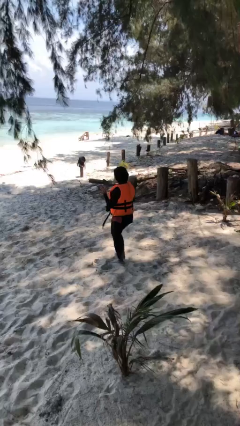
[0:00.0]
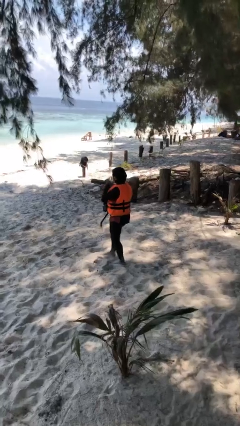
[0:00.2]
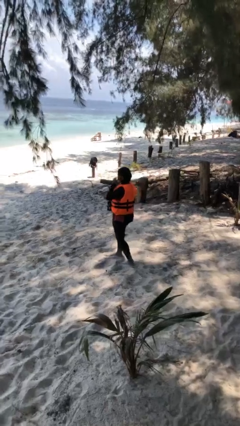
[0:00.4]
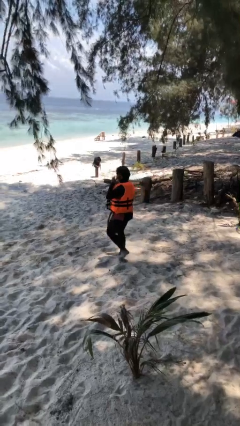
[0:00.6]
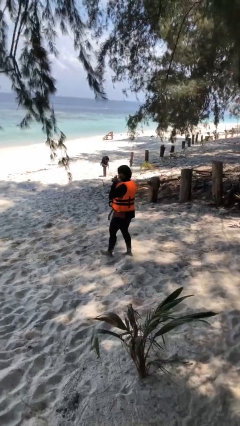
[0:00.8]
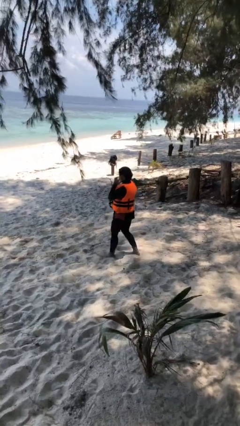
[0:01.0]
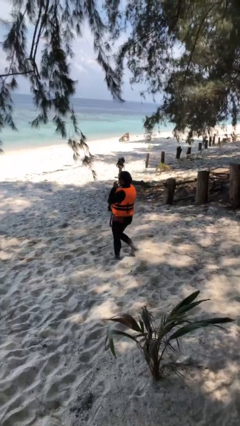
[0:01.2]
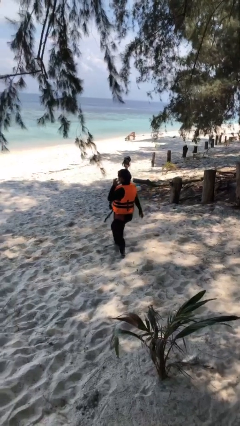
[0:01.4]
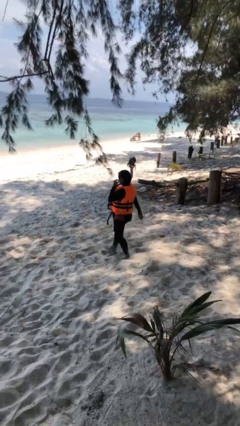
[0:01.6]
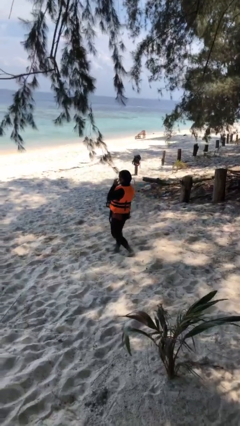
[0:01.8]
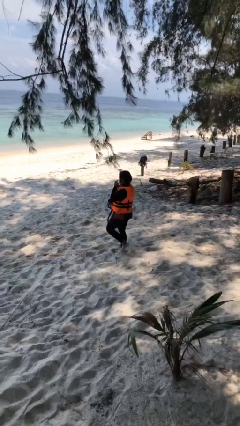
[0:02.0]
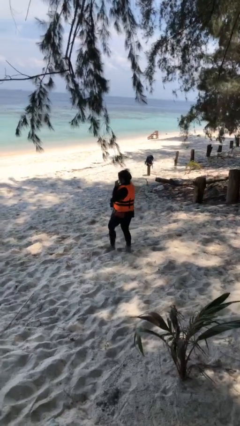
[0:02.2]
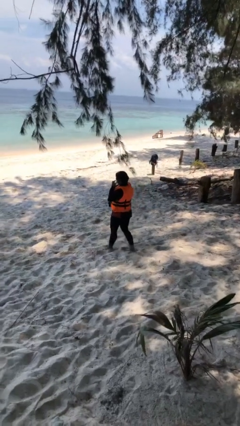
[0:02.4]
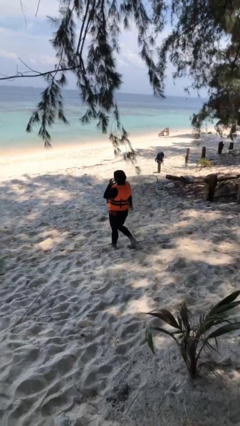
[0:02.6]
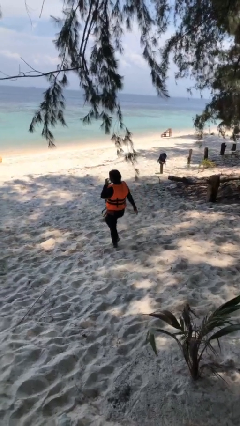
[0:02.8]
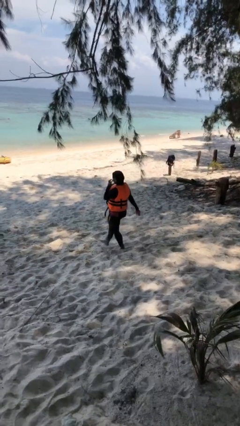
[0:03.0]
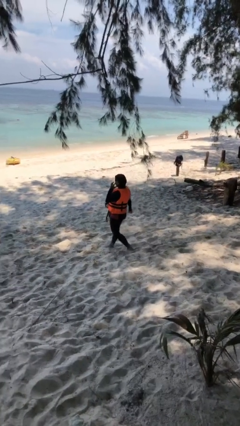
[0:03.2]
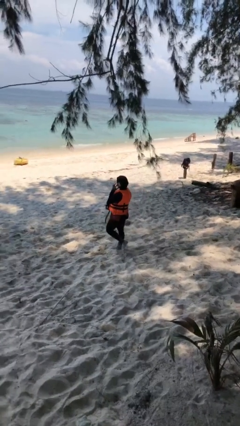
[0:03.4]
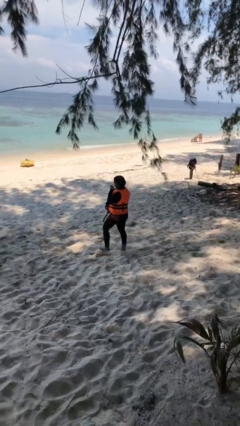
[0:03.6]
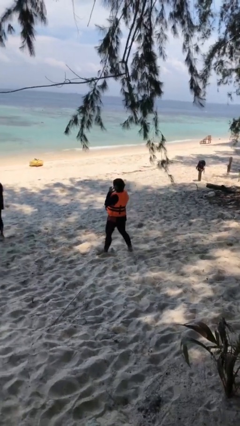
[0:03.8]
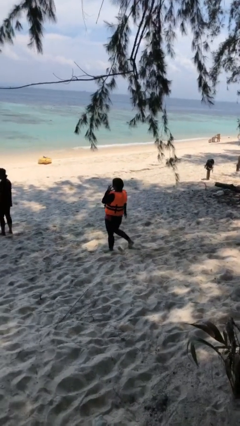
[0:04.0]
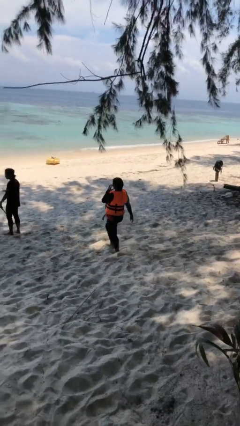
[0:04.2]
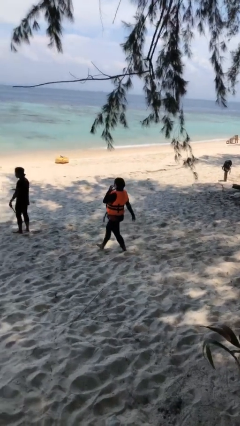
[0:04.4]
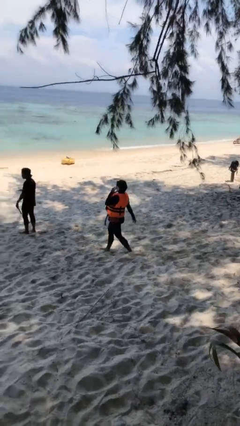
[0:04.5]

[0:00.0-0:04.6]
person talks on phone

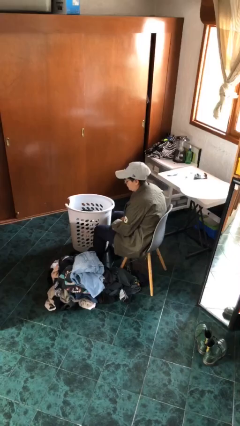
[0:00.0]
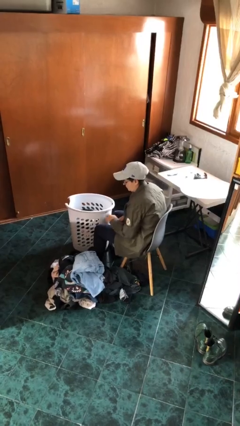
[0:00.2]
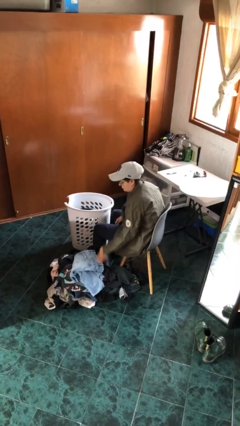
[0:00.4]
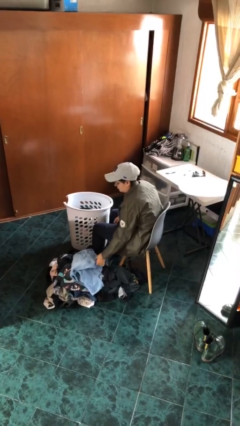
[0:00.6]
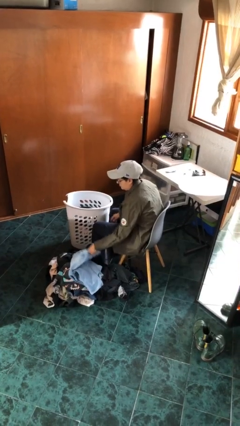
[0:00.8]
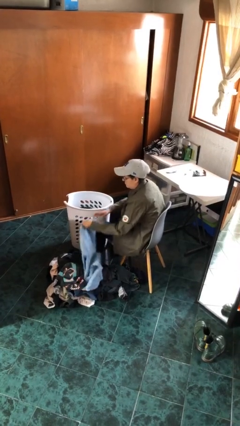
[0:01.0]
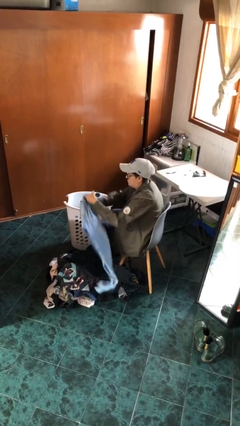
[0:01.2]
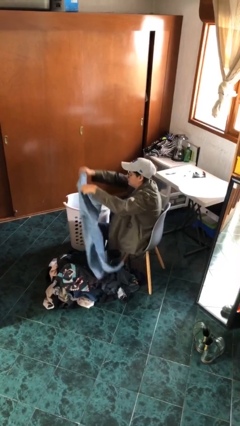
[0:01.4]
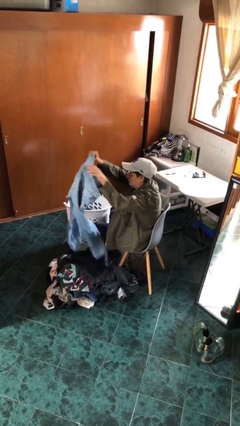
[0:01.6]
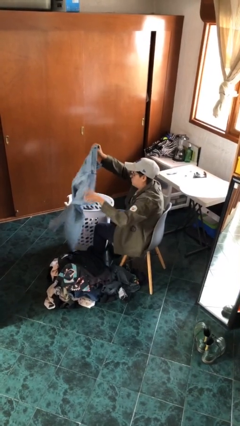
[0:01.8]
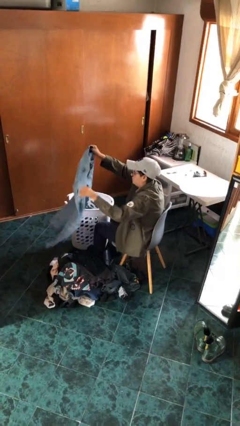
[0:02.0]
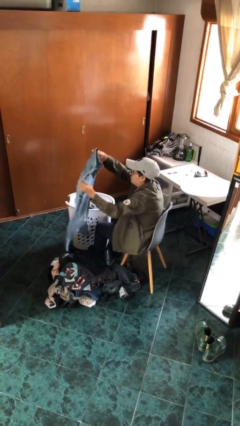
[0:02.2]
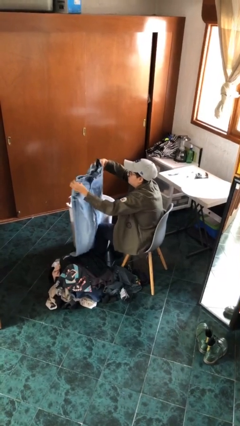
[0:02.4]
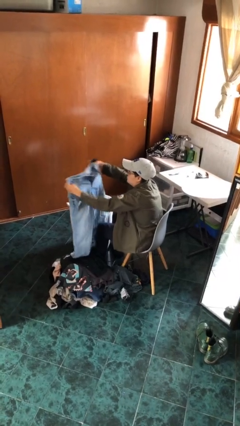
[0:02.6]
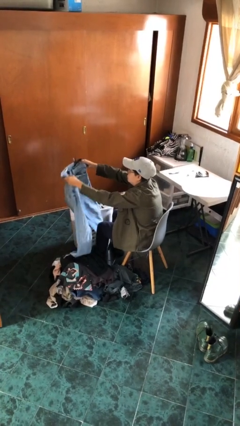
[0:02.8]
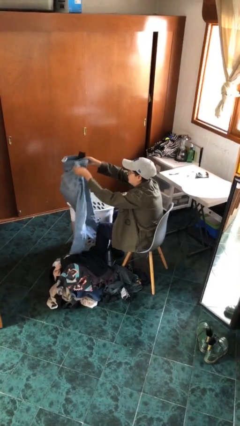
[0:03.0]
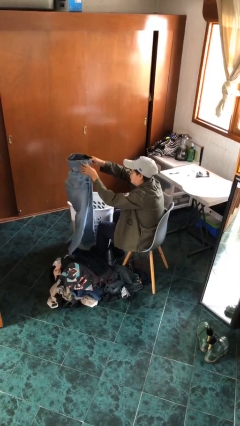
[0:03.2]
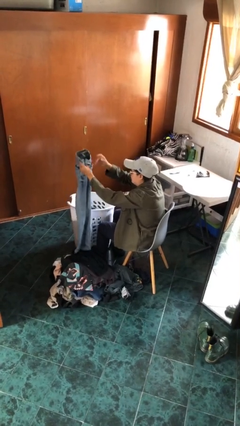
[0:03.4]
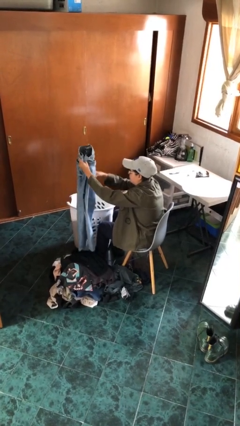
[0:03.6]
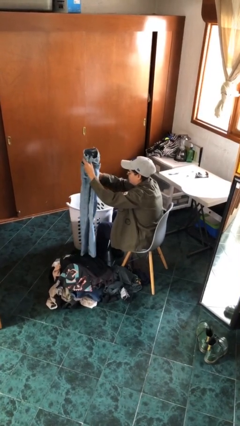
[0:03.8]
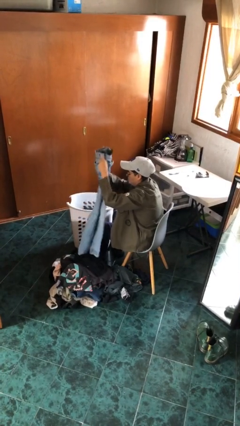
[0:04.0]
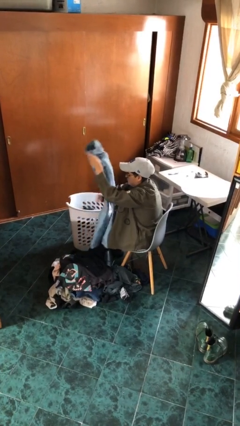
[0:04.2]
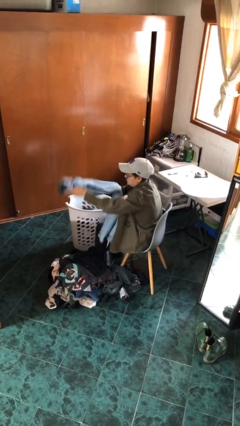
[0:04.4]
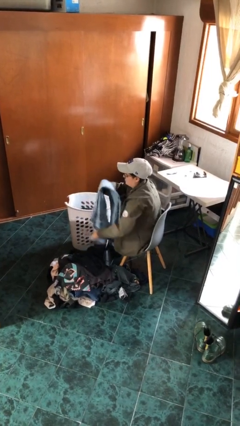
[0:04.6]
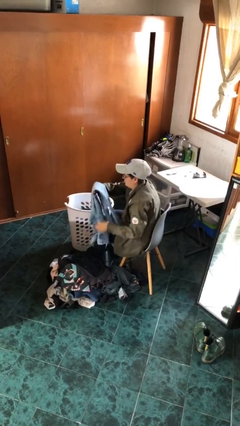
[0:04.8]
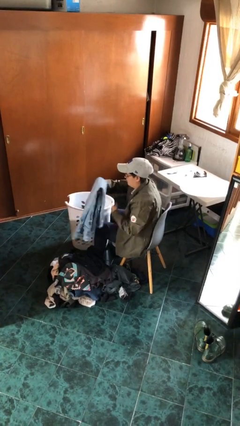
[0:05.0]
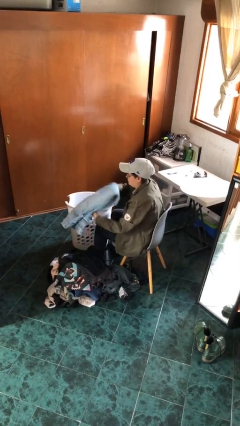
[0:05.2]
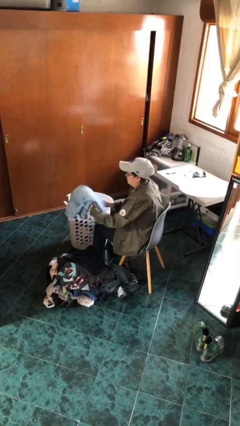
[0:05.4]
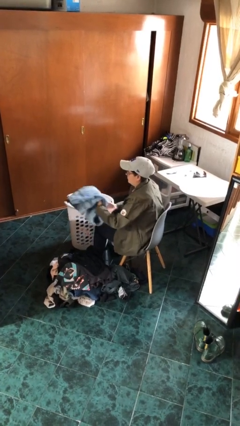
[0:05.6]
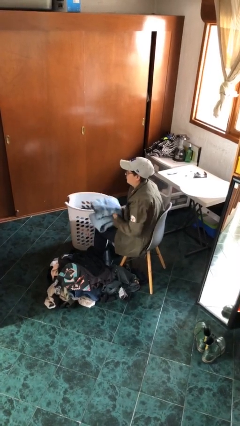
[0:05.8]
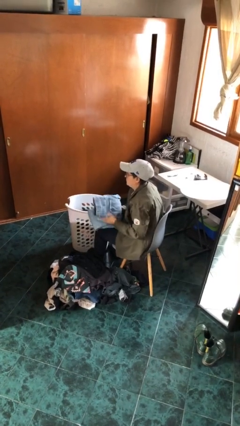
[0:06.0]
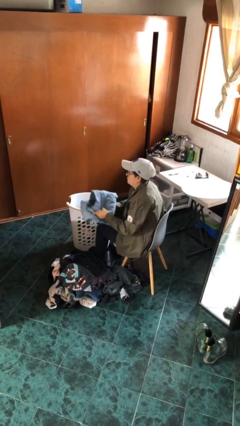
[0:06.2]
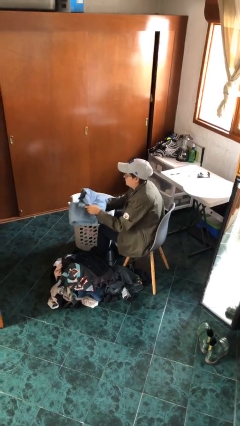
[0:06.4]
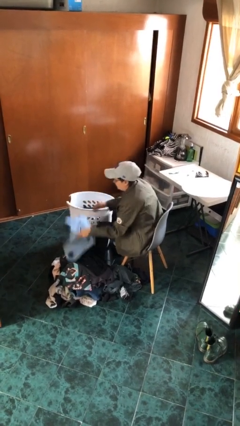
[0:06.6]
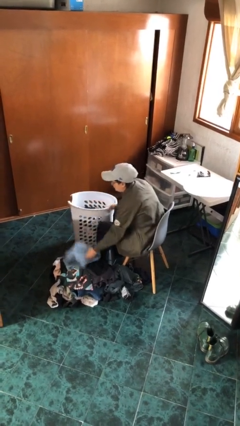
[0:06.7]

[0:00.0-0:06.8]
person folds pants

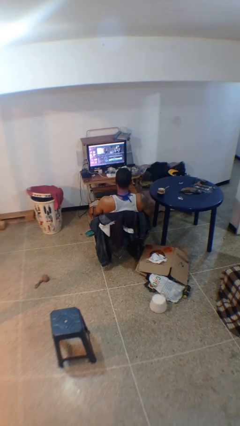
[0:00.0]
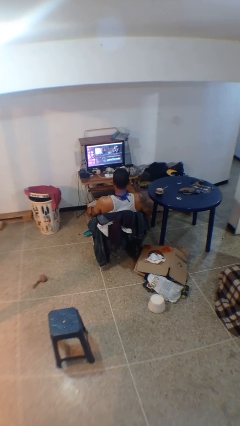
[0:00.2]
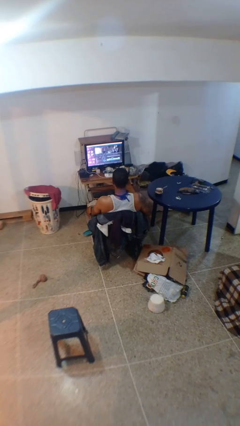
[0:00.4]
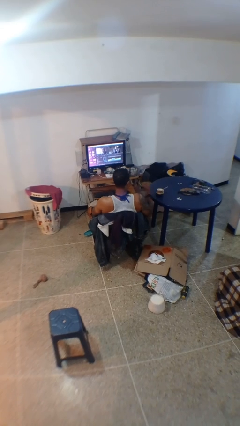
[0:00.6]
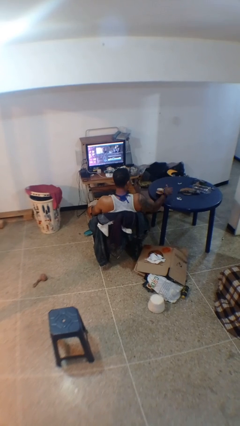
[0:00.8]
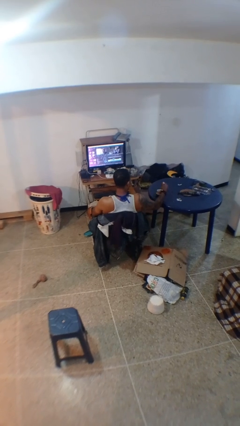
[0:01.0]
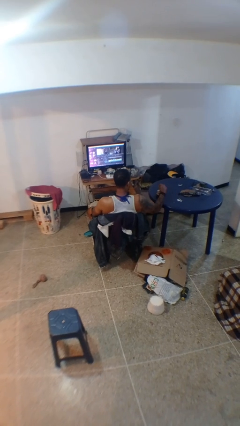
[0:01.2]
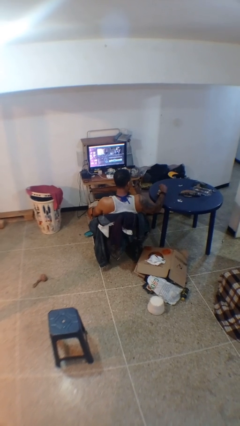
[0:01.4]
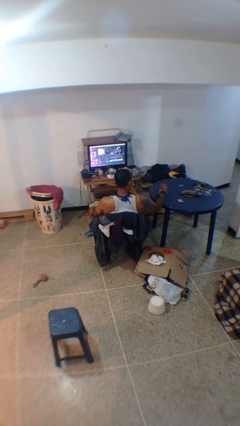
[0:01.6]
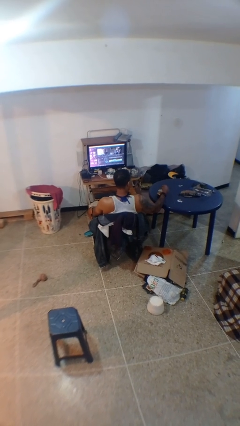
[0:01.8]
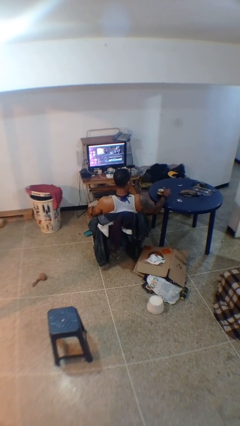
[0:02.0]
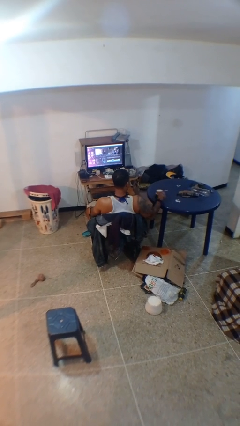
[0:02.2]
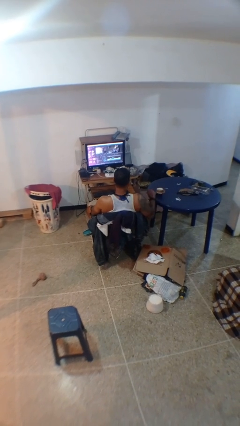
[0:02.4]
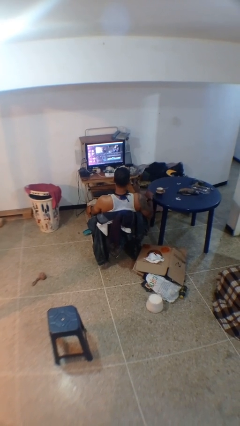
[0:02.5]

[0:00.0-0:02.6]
person stirs mug

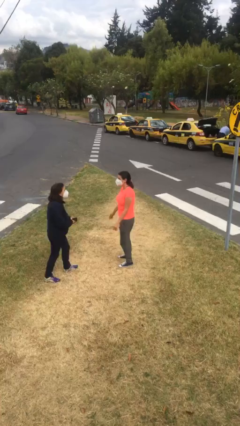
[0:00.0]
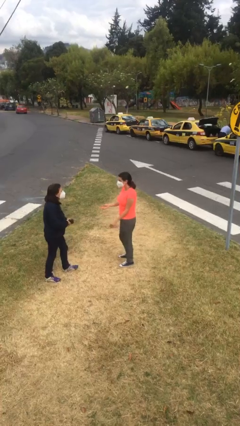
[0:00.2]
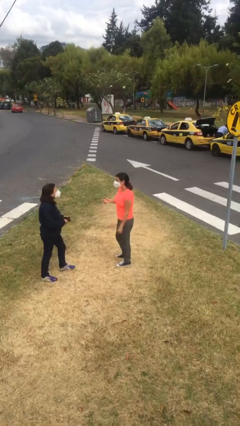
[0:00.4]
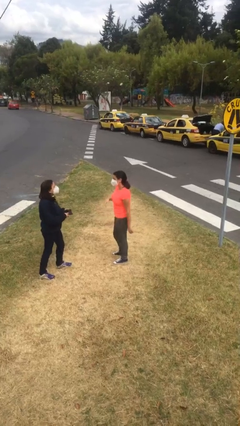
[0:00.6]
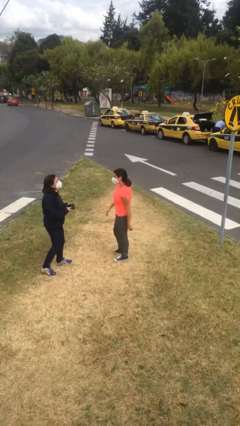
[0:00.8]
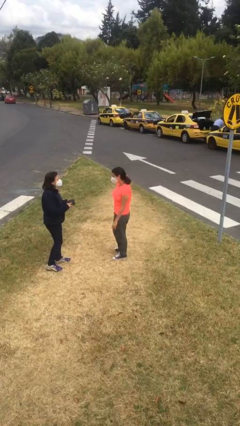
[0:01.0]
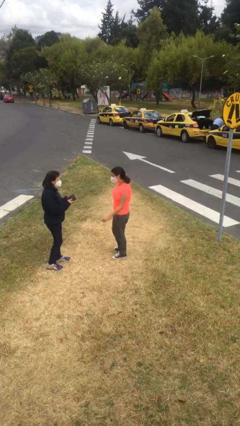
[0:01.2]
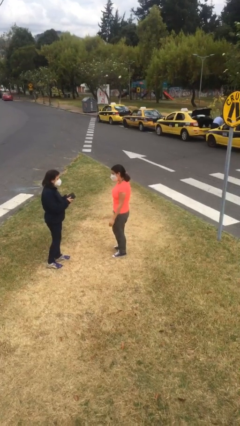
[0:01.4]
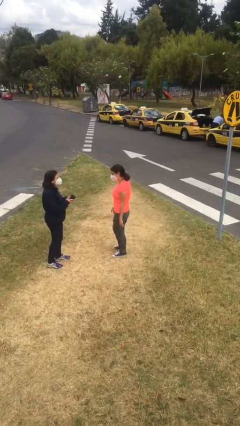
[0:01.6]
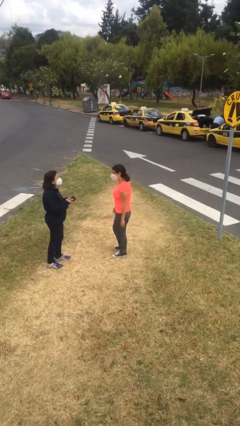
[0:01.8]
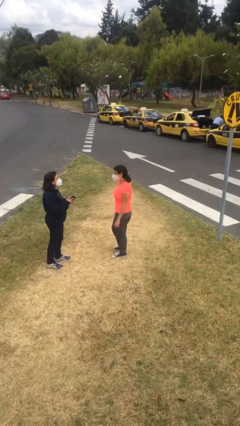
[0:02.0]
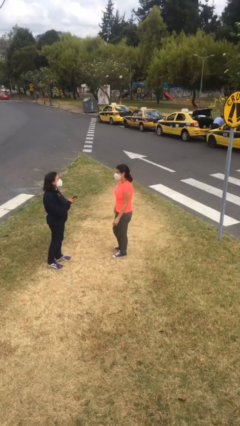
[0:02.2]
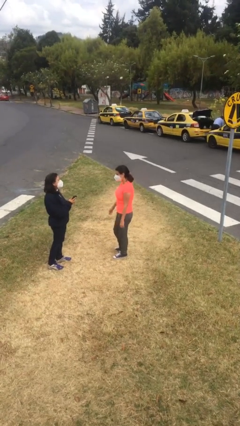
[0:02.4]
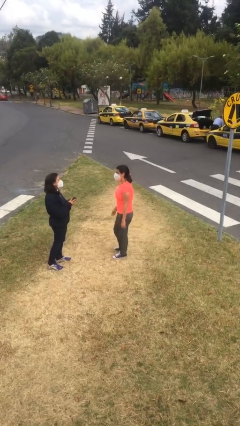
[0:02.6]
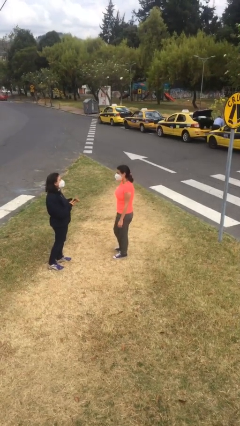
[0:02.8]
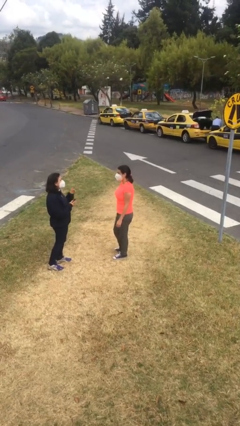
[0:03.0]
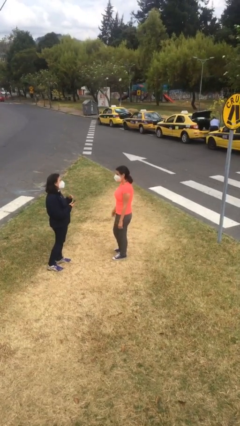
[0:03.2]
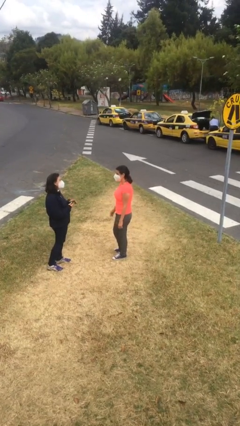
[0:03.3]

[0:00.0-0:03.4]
person talks to person

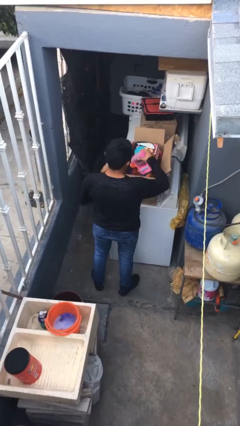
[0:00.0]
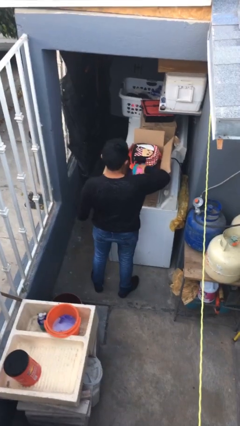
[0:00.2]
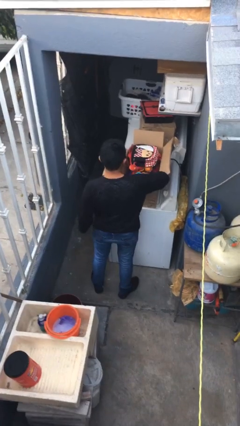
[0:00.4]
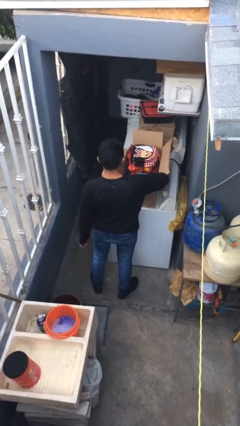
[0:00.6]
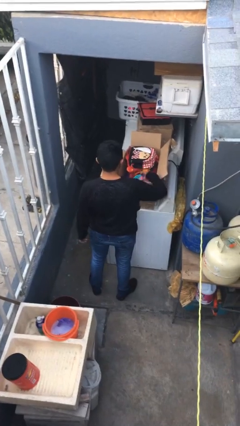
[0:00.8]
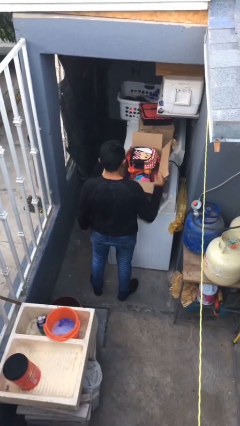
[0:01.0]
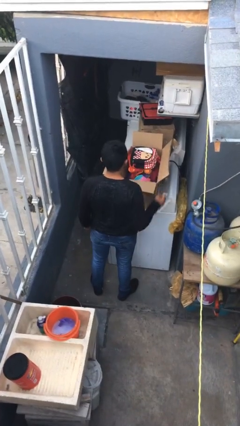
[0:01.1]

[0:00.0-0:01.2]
person puts object into box
